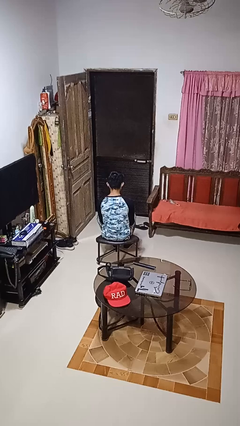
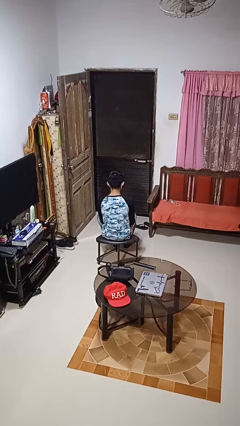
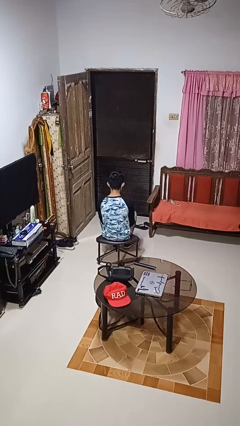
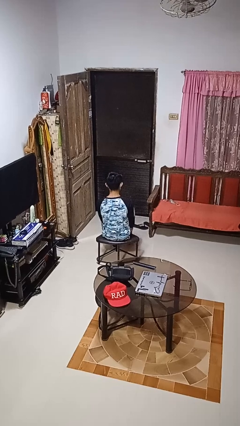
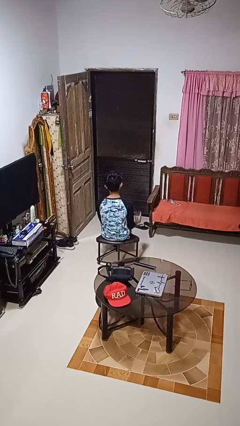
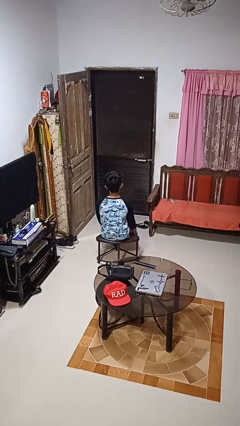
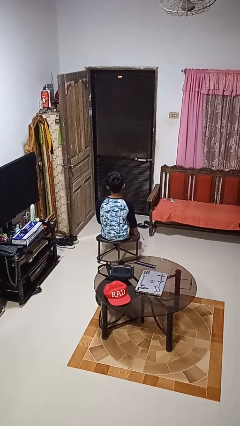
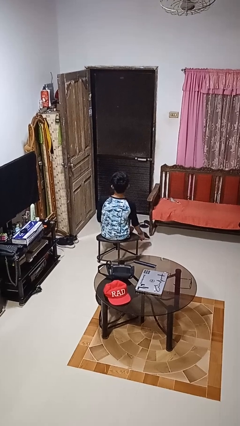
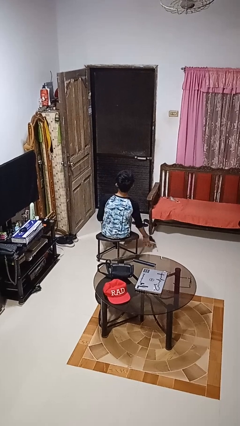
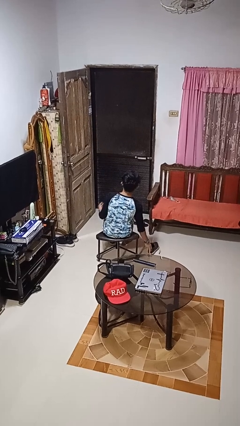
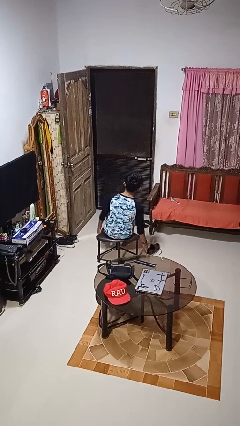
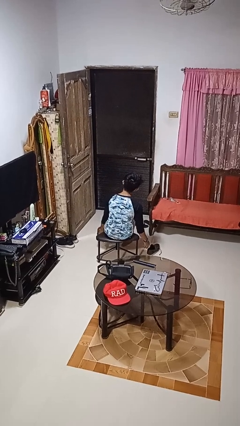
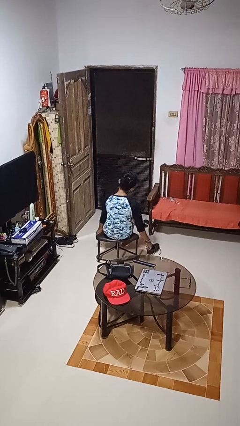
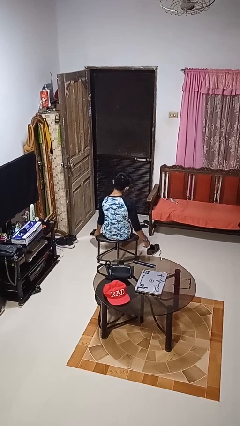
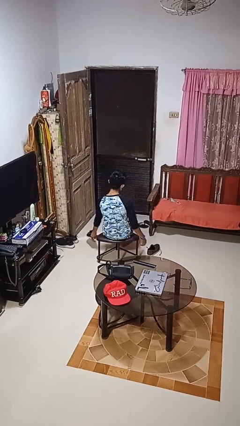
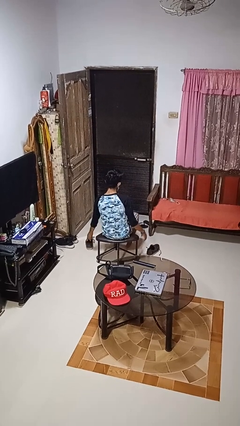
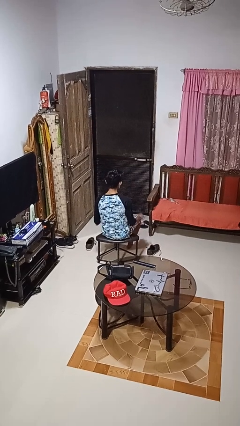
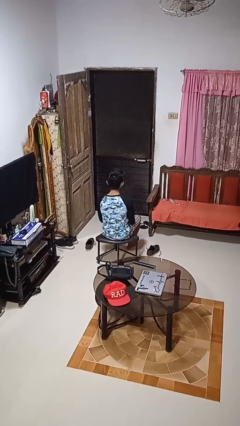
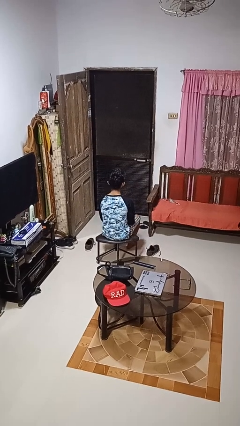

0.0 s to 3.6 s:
person takes off shoes

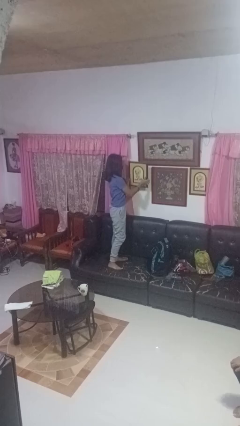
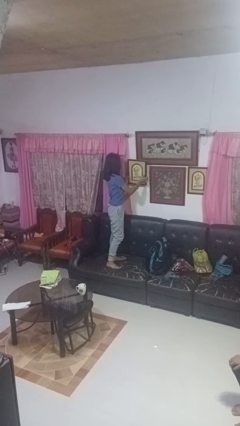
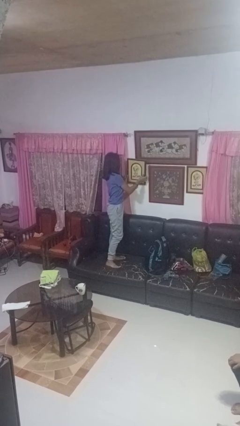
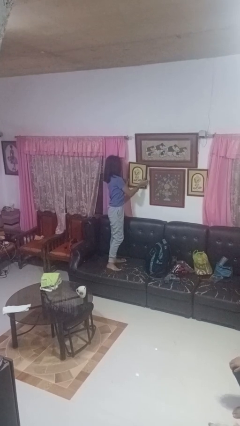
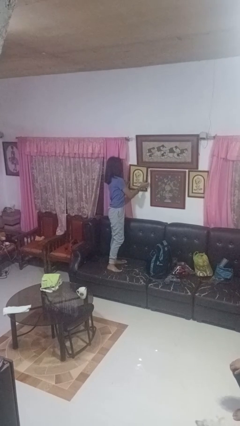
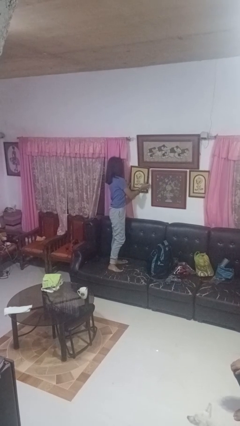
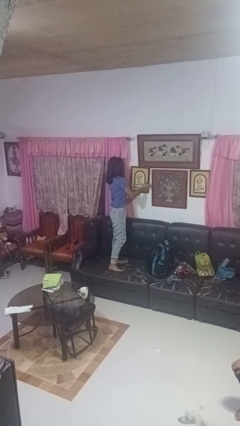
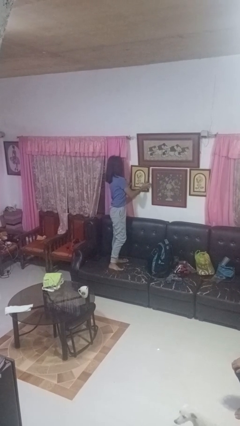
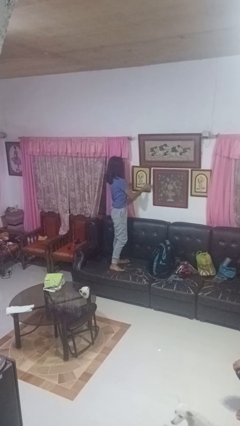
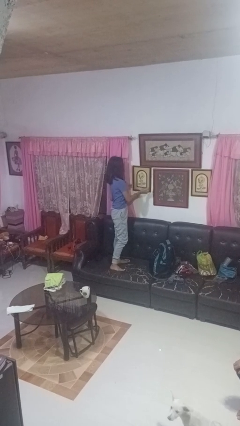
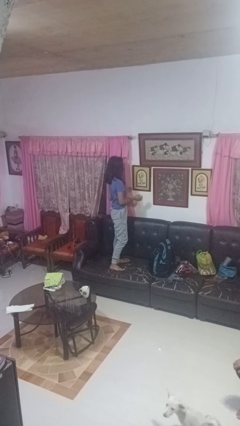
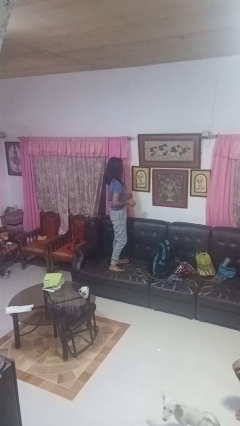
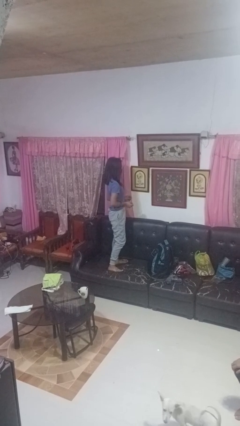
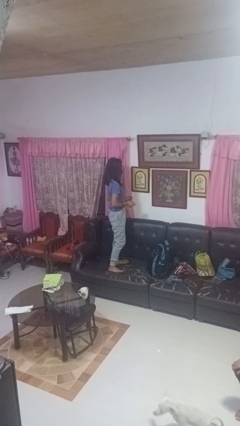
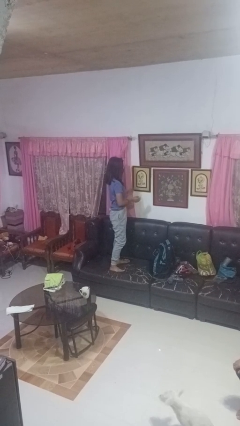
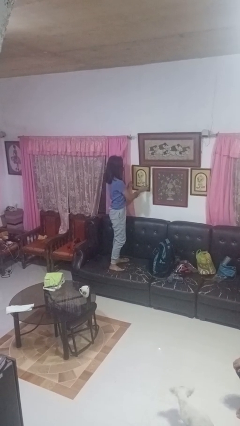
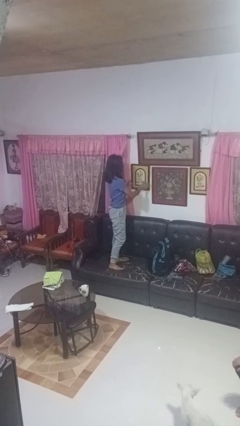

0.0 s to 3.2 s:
person puts up picture frame

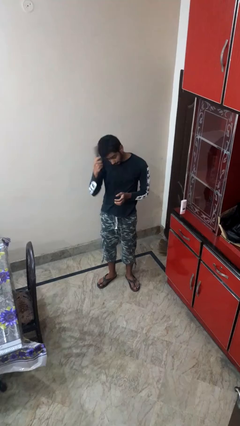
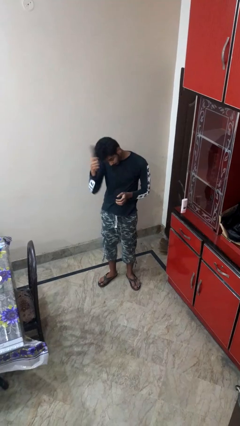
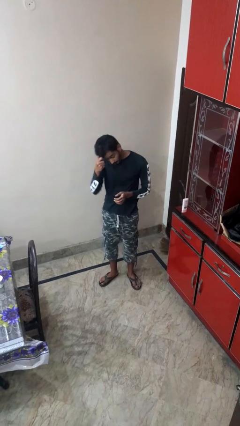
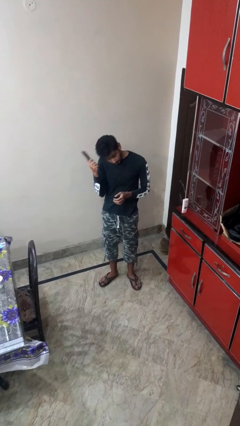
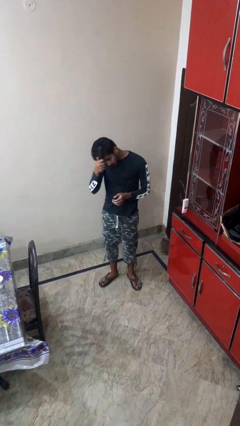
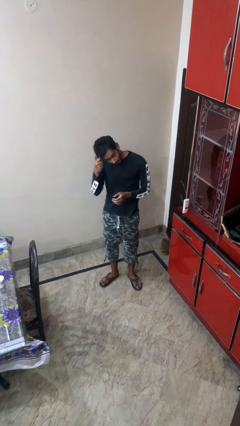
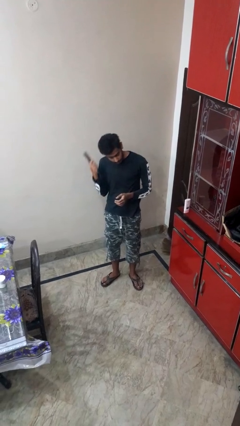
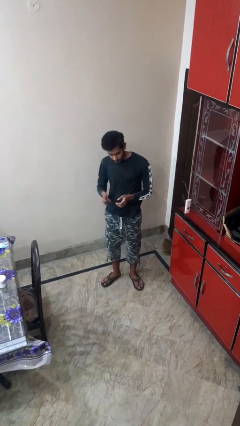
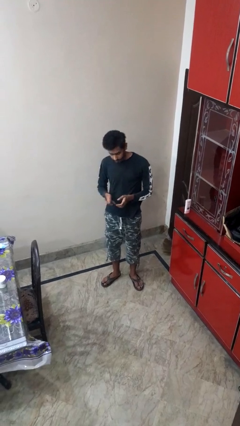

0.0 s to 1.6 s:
person brushes hair

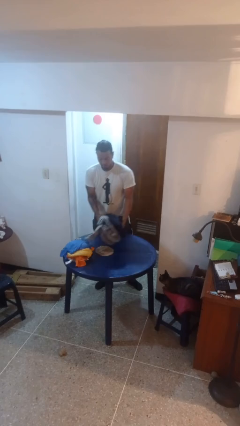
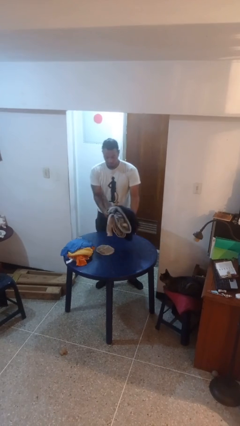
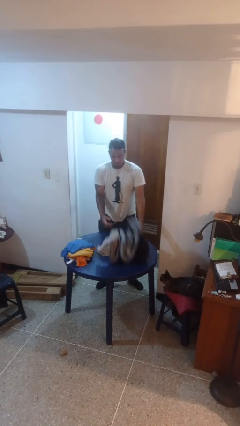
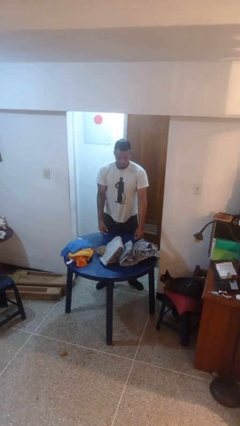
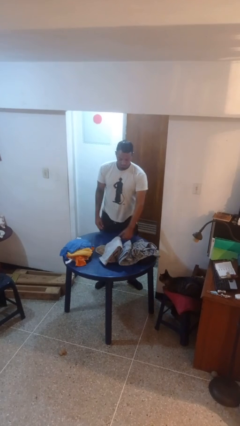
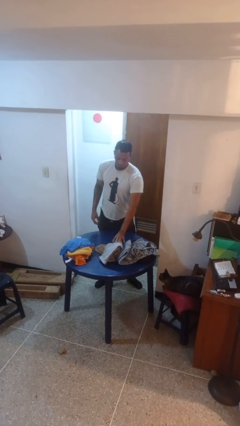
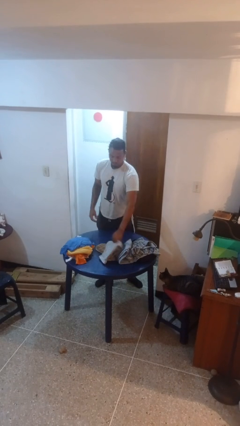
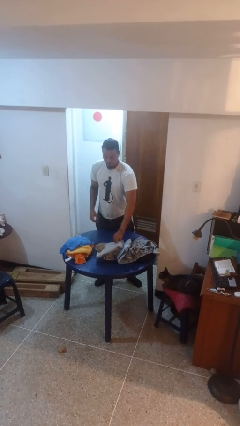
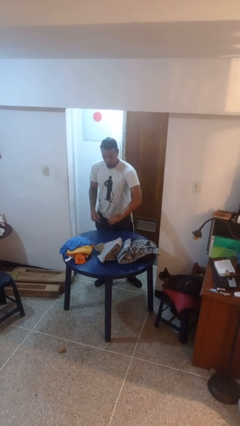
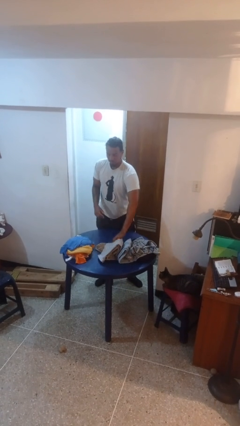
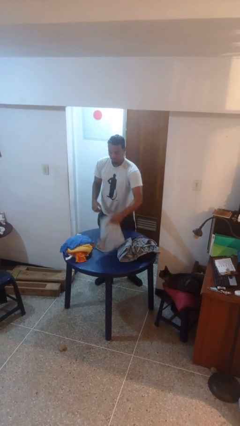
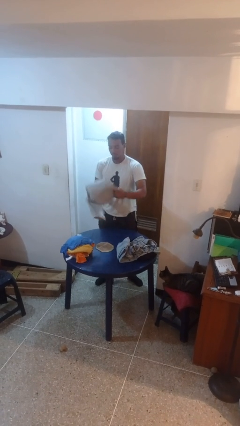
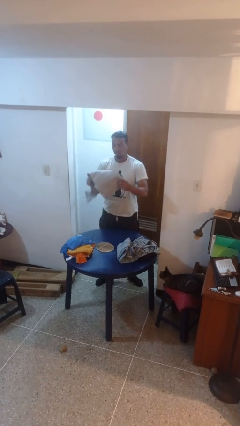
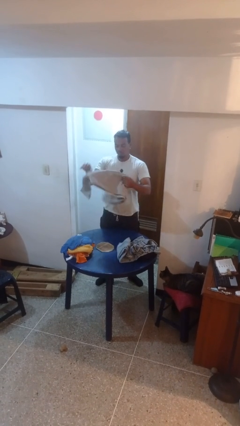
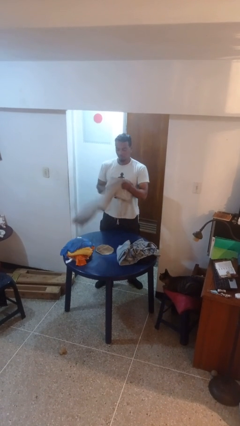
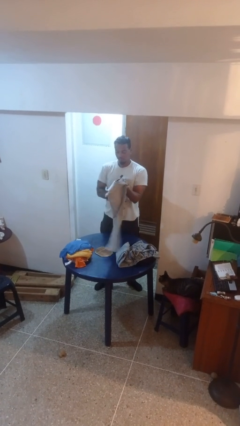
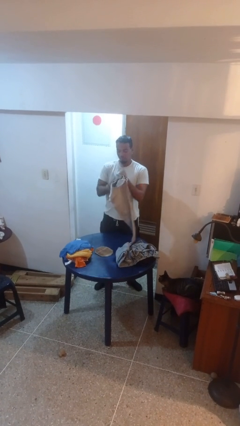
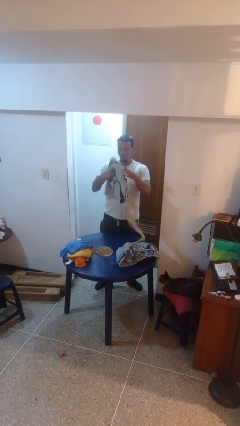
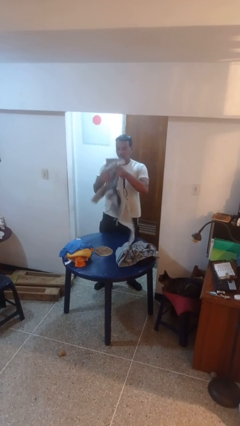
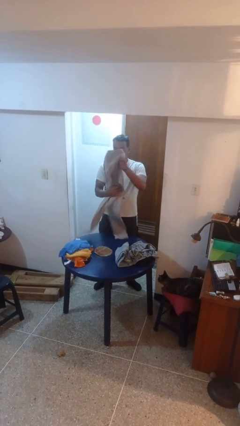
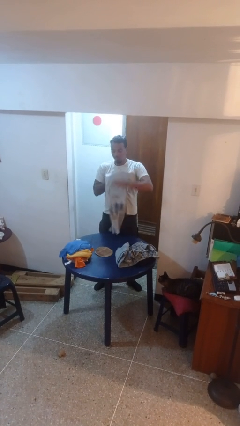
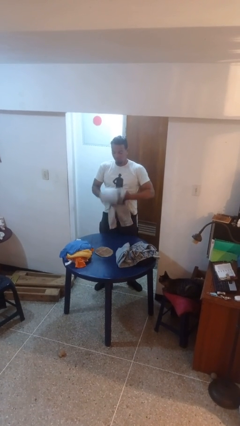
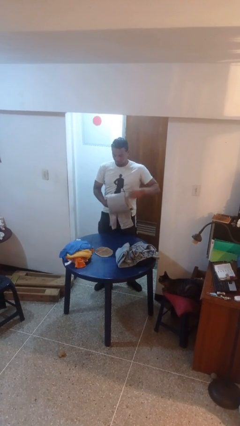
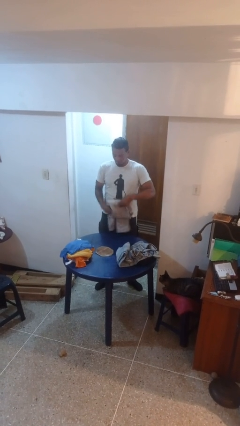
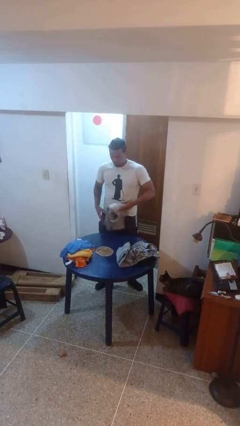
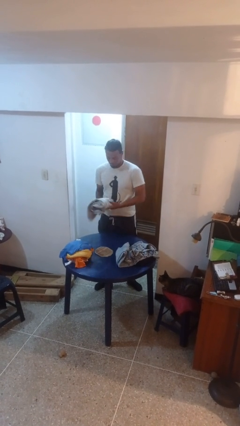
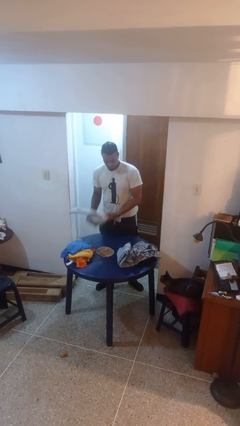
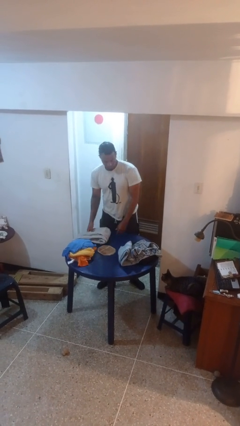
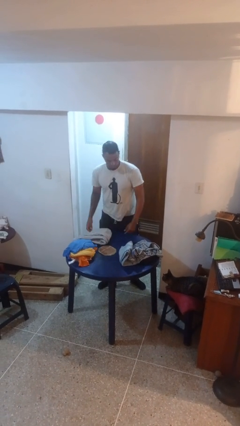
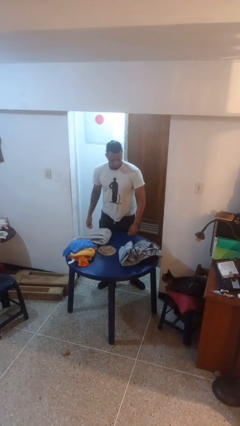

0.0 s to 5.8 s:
person folds pants

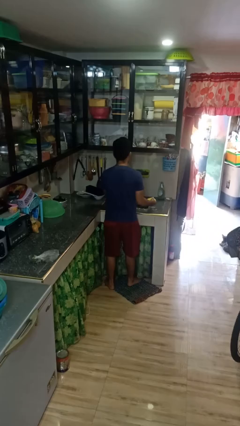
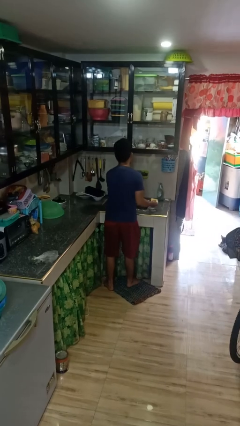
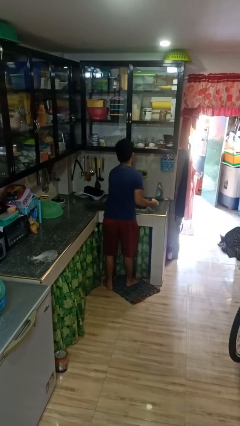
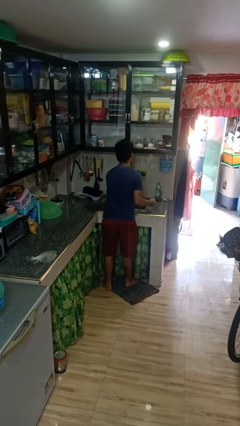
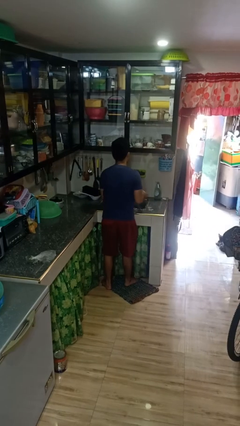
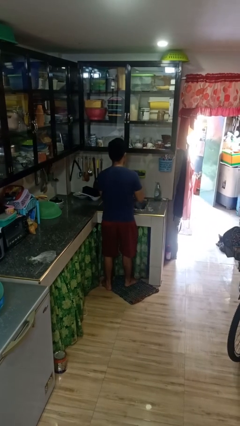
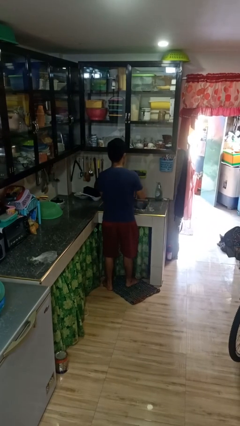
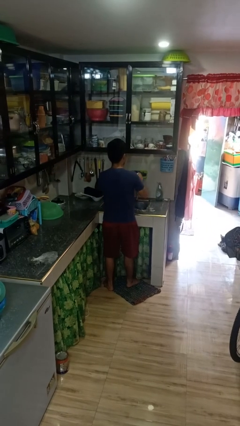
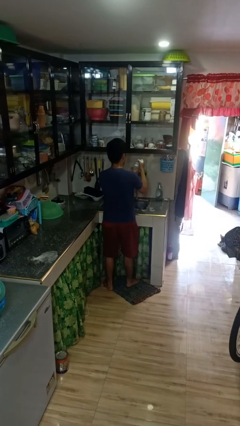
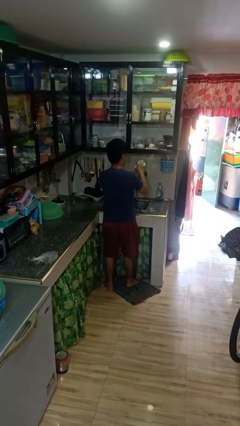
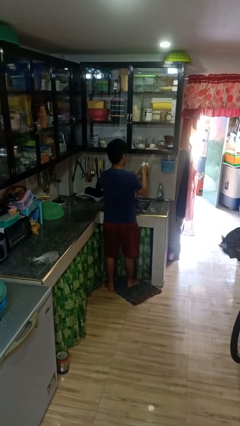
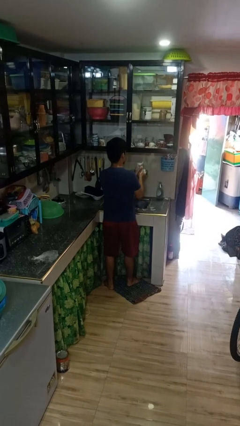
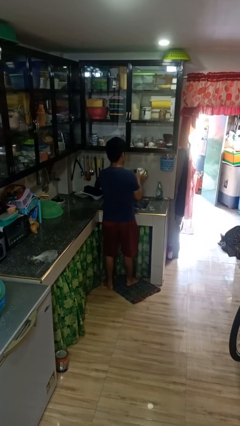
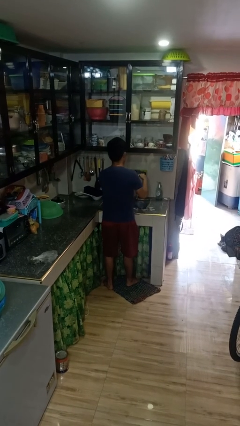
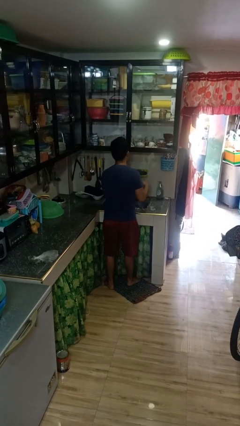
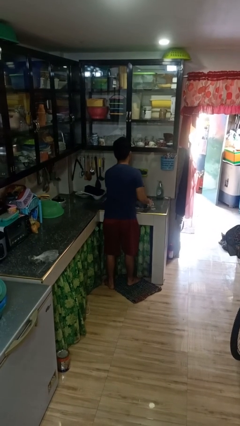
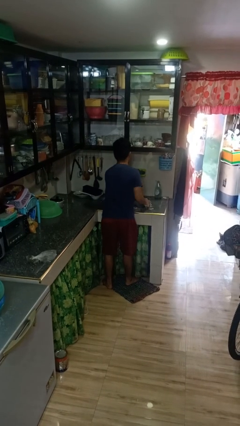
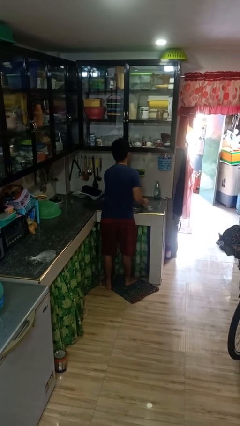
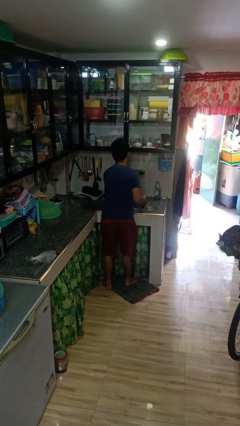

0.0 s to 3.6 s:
person washes dish
